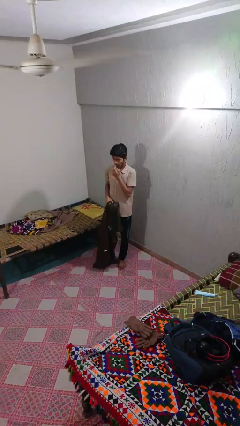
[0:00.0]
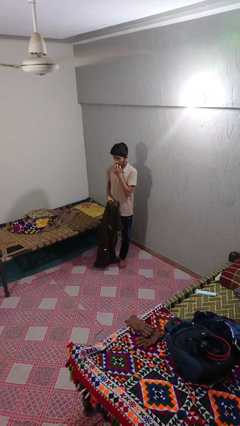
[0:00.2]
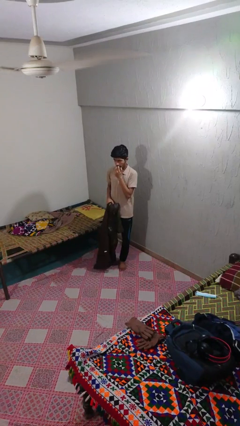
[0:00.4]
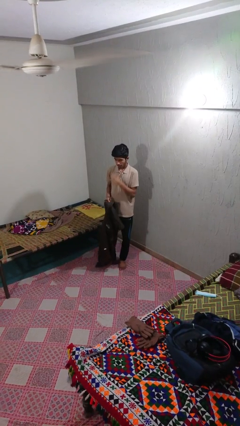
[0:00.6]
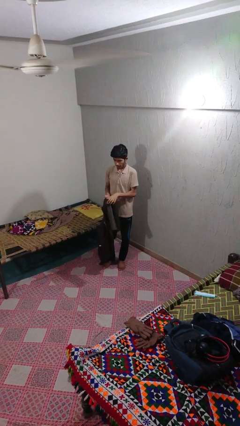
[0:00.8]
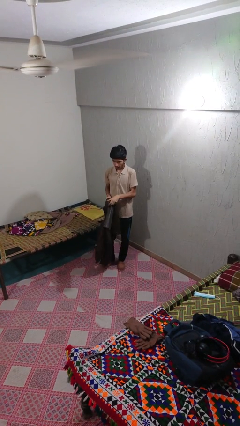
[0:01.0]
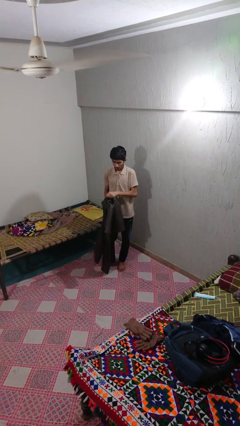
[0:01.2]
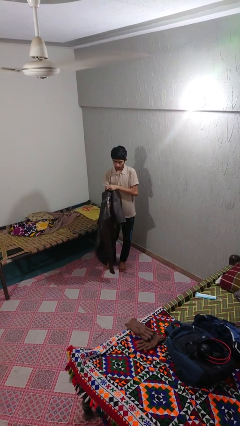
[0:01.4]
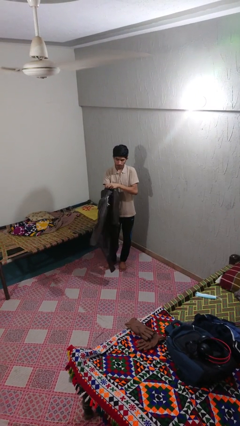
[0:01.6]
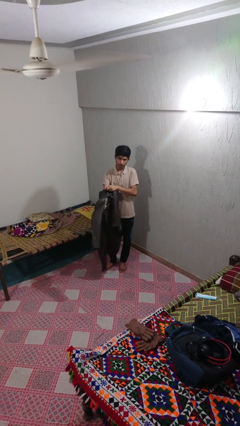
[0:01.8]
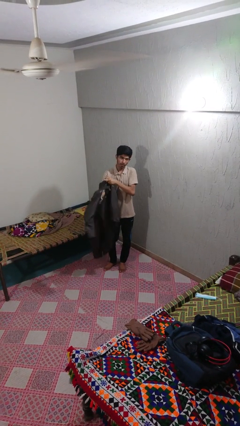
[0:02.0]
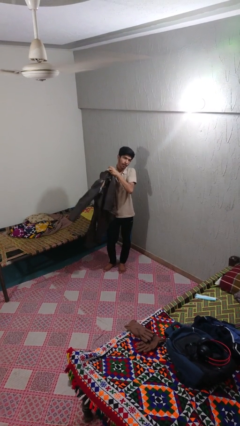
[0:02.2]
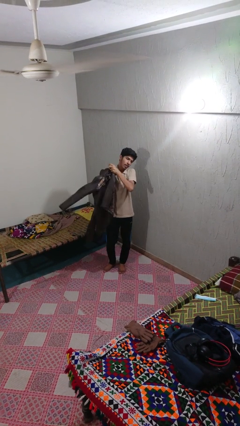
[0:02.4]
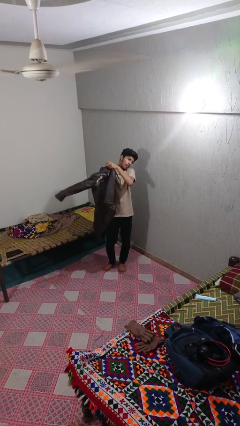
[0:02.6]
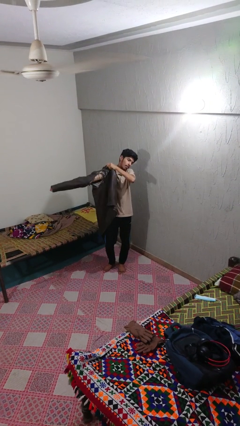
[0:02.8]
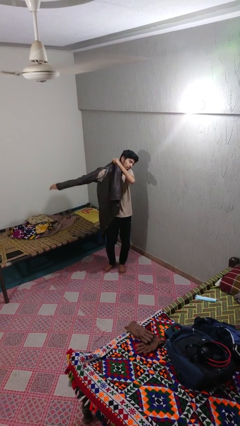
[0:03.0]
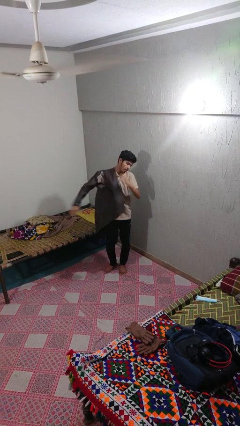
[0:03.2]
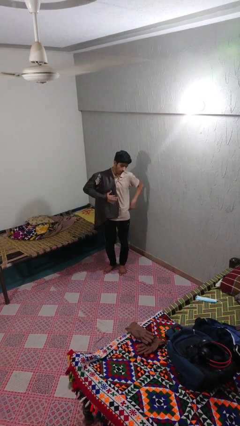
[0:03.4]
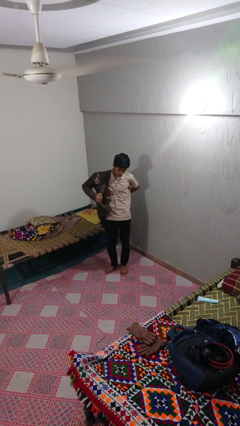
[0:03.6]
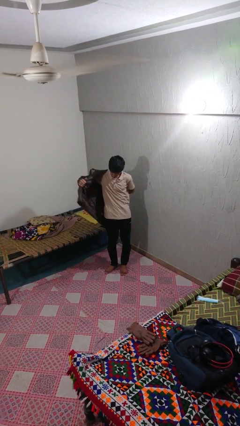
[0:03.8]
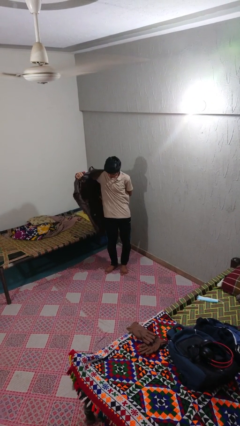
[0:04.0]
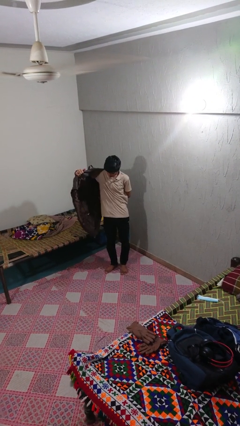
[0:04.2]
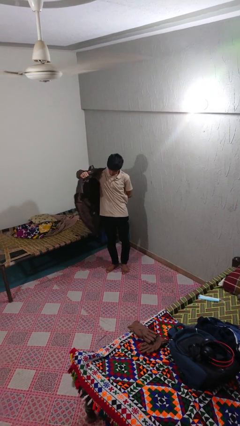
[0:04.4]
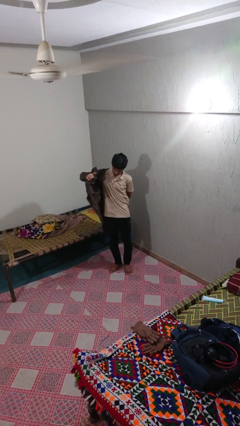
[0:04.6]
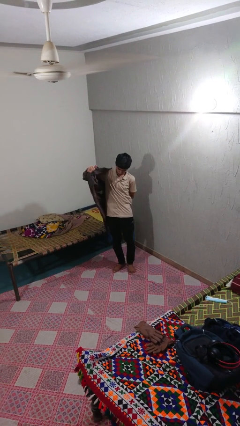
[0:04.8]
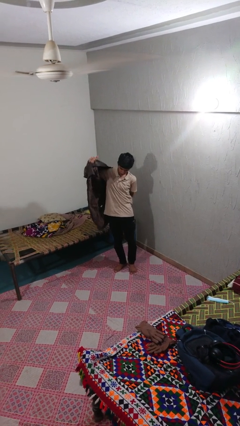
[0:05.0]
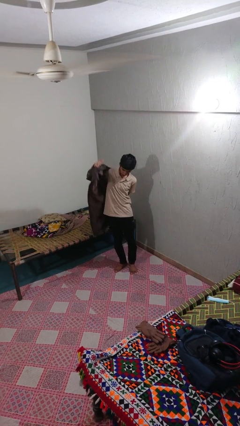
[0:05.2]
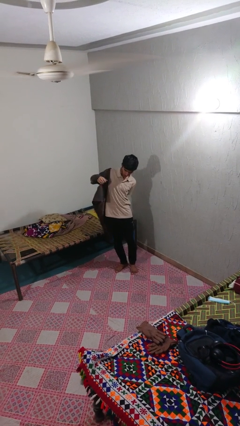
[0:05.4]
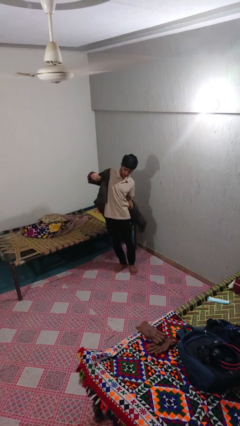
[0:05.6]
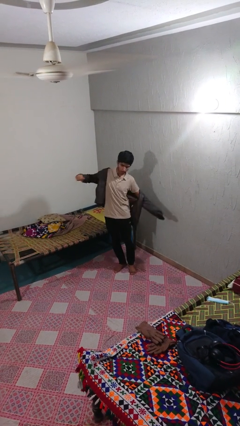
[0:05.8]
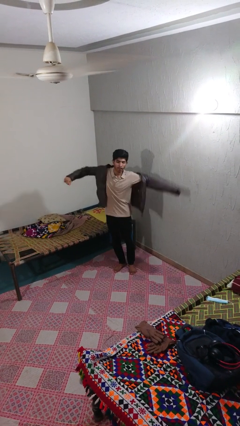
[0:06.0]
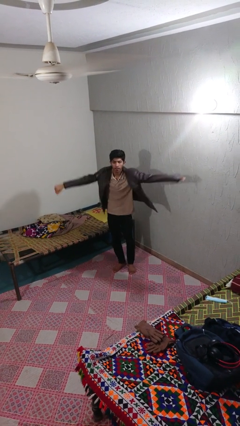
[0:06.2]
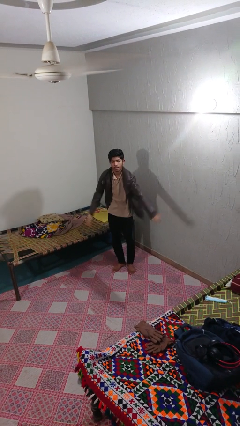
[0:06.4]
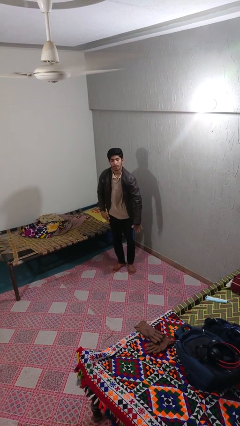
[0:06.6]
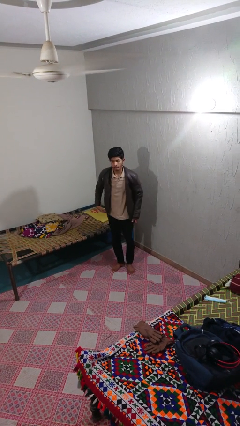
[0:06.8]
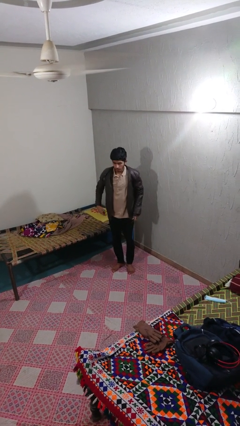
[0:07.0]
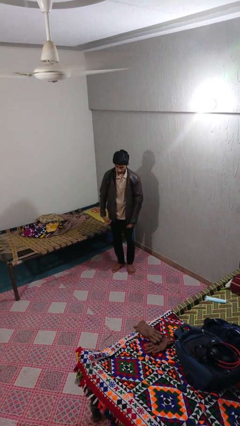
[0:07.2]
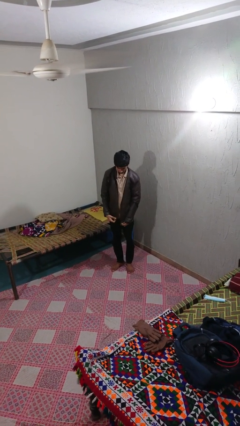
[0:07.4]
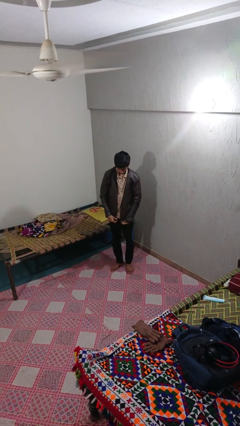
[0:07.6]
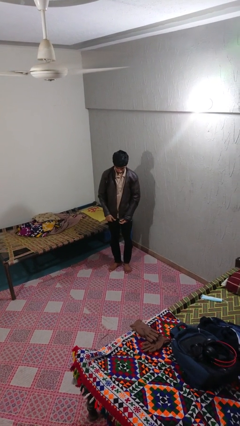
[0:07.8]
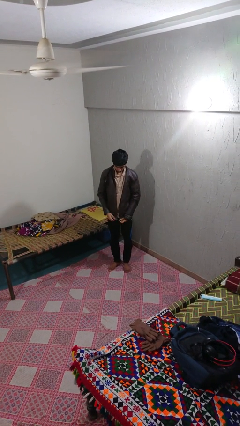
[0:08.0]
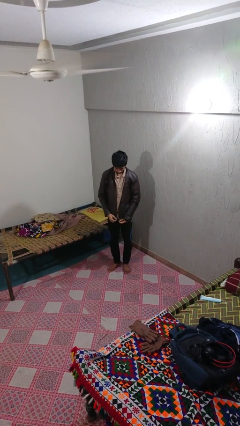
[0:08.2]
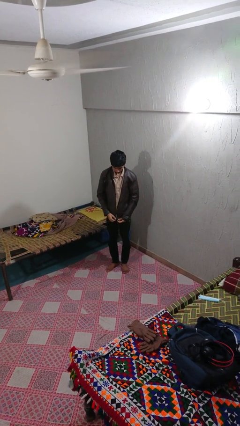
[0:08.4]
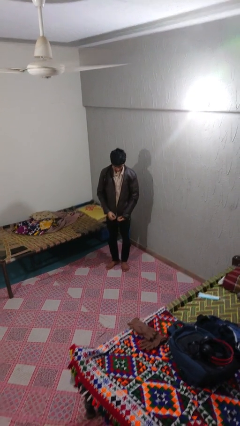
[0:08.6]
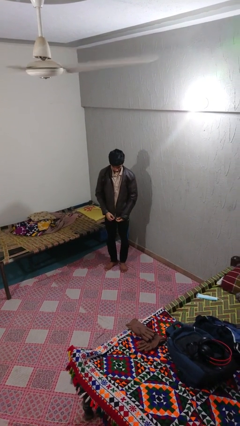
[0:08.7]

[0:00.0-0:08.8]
person puts on jacket

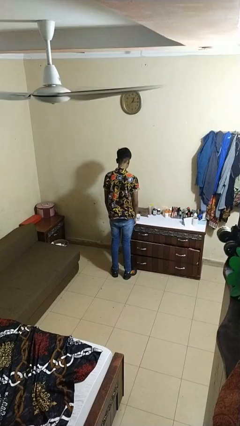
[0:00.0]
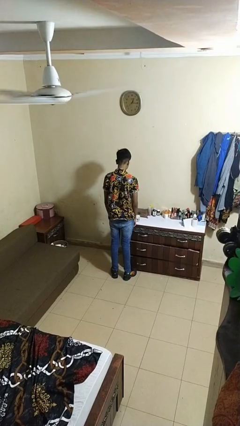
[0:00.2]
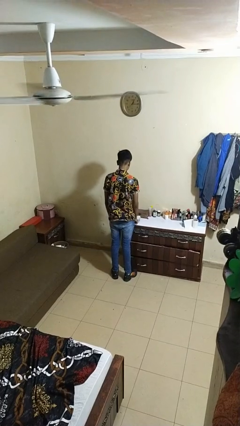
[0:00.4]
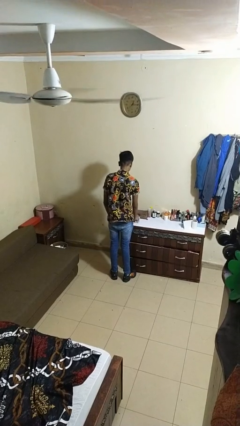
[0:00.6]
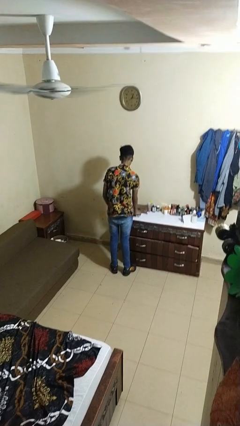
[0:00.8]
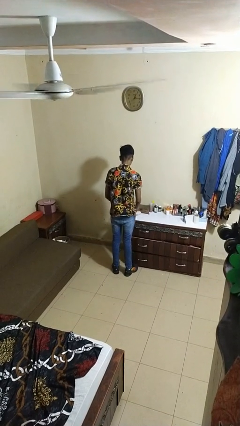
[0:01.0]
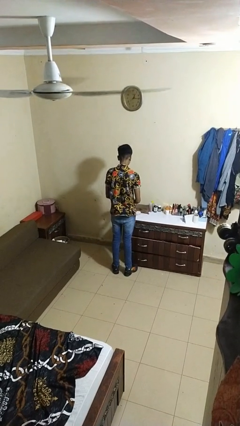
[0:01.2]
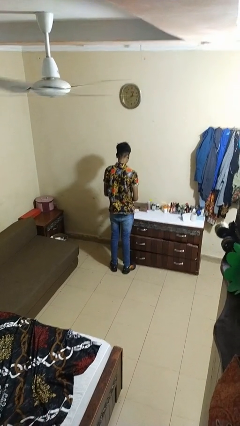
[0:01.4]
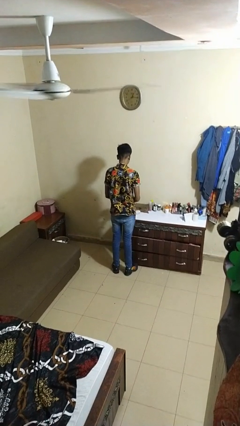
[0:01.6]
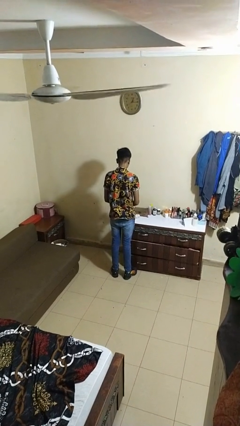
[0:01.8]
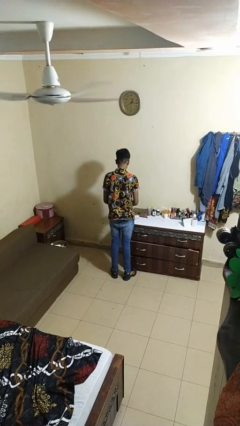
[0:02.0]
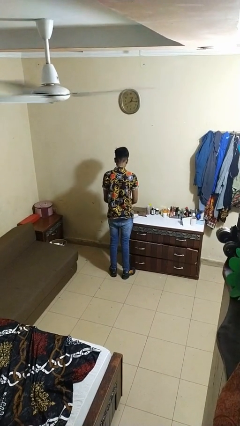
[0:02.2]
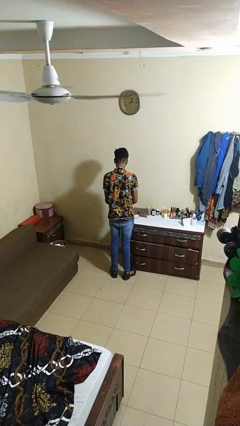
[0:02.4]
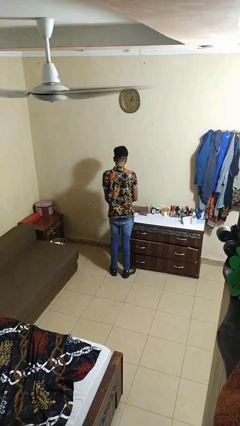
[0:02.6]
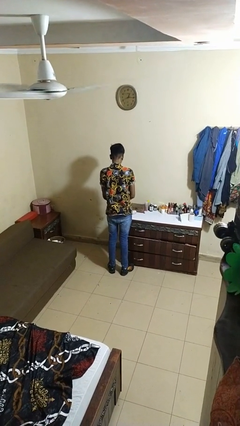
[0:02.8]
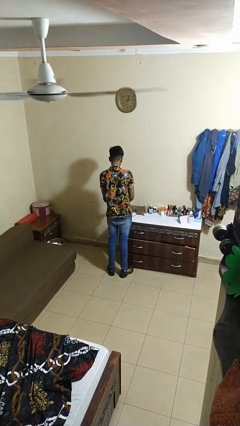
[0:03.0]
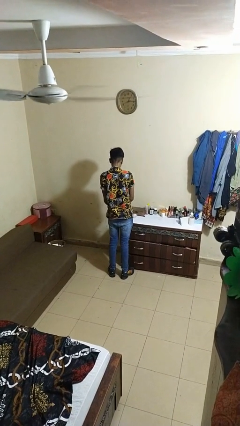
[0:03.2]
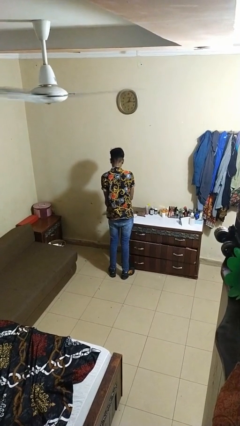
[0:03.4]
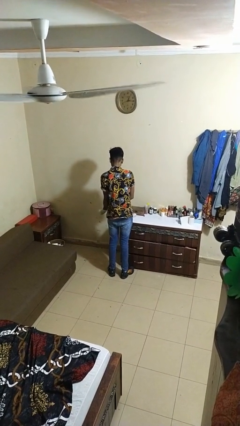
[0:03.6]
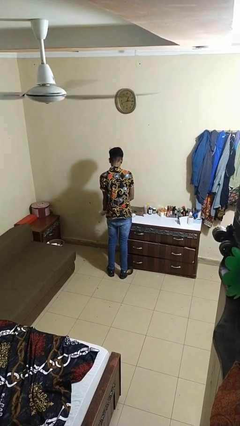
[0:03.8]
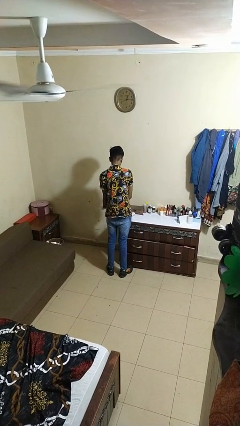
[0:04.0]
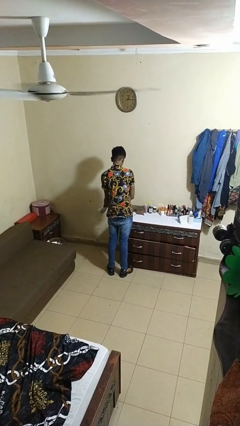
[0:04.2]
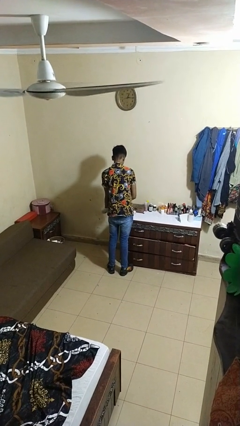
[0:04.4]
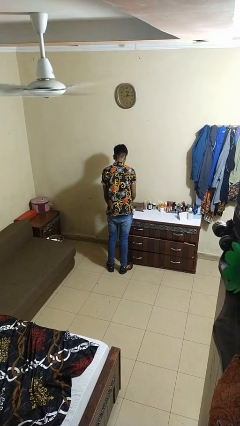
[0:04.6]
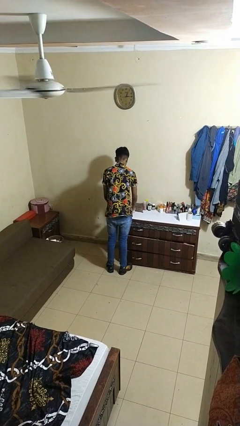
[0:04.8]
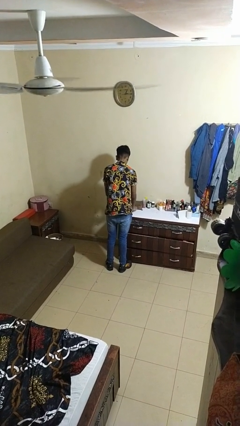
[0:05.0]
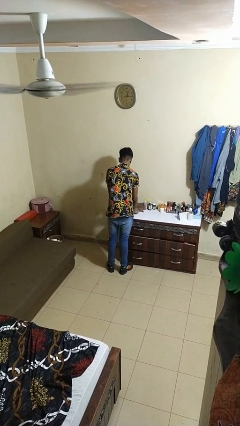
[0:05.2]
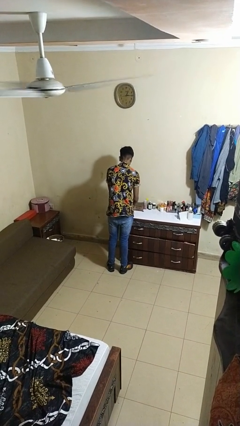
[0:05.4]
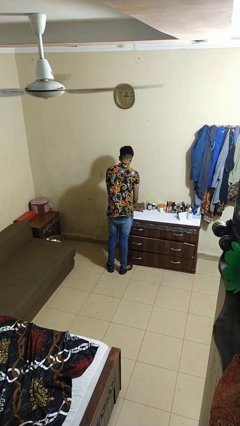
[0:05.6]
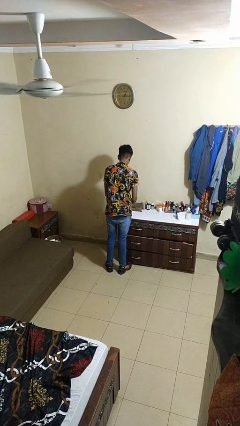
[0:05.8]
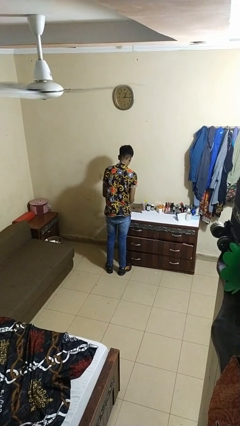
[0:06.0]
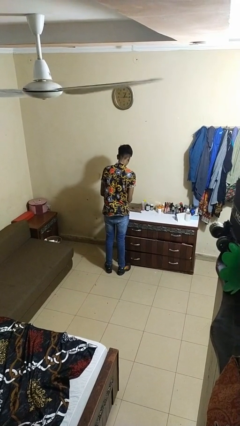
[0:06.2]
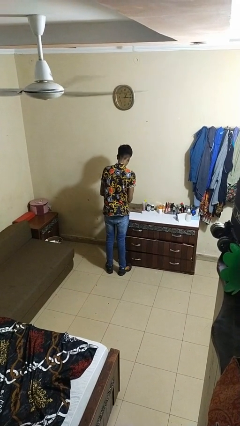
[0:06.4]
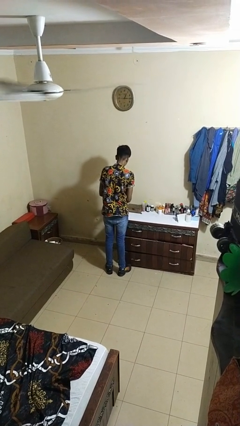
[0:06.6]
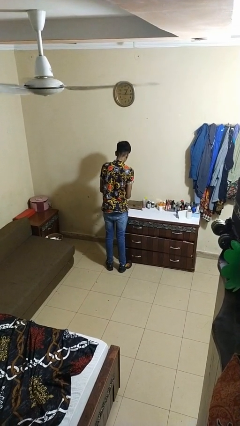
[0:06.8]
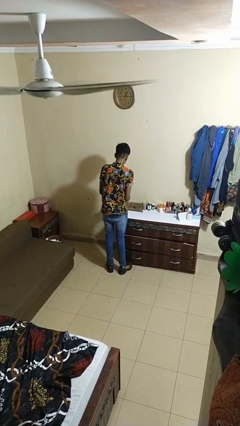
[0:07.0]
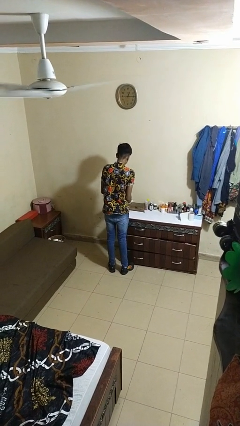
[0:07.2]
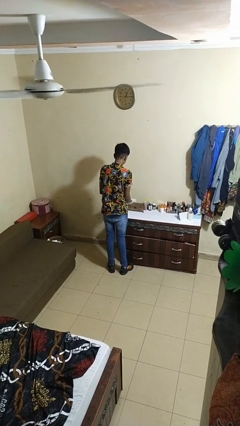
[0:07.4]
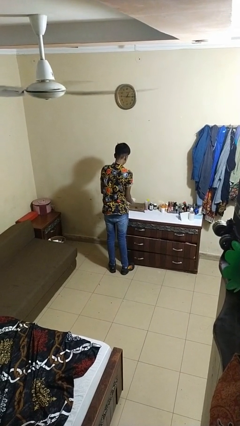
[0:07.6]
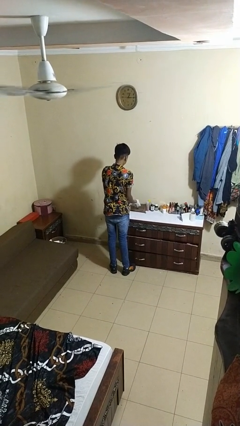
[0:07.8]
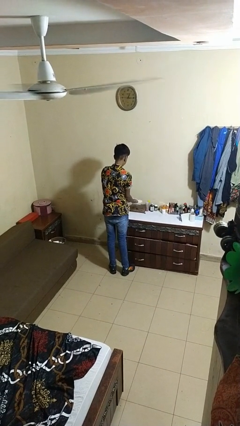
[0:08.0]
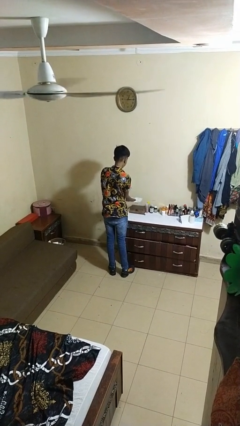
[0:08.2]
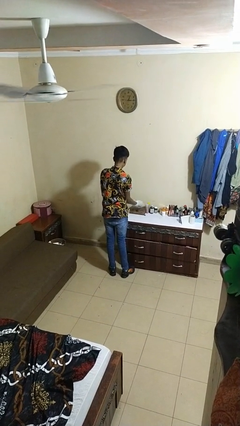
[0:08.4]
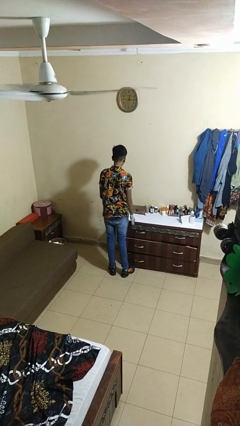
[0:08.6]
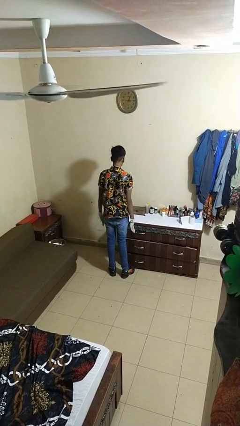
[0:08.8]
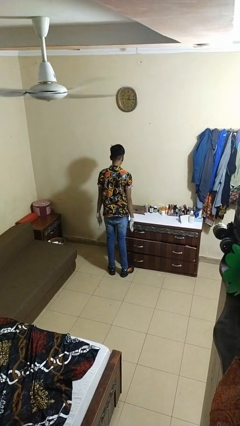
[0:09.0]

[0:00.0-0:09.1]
person puts on gloves
